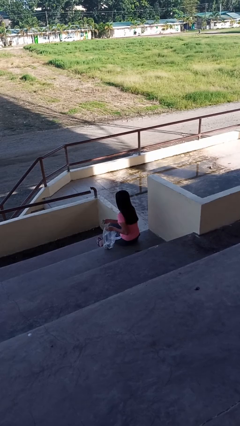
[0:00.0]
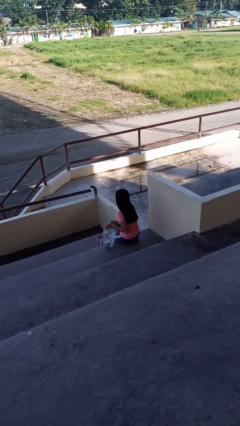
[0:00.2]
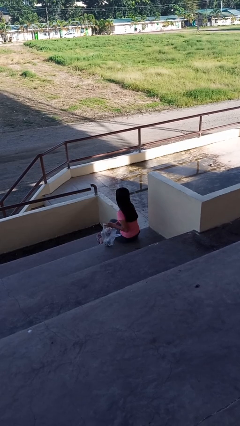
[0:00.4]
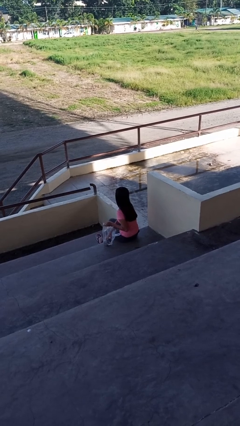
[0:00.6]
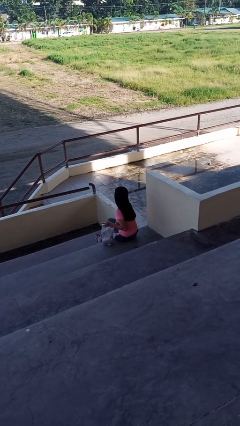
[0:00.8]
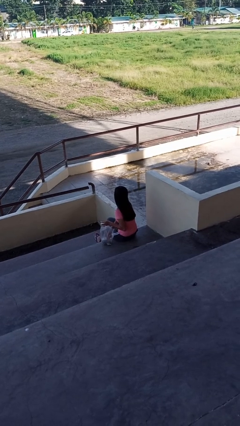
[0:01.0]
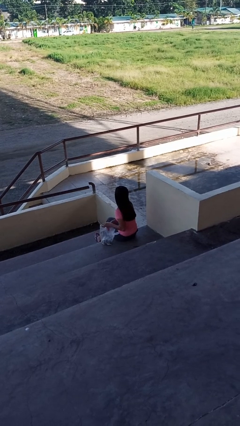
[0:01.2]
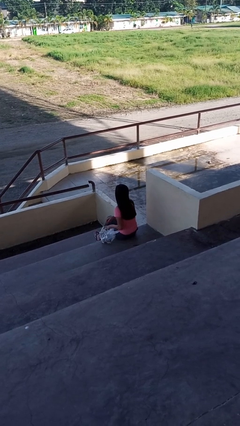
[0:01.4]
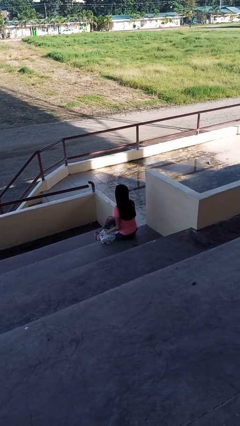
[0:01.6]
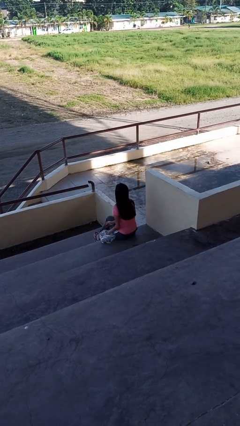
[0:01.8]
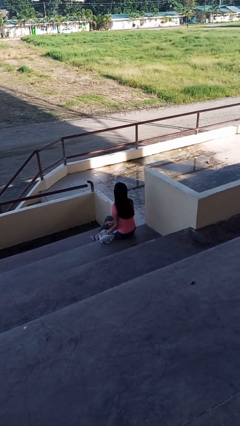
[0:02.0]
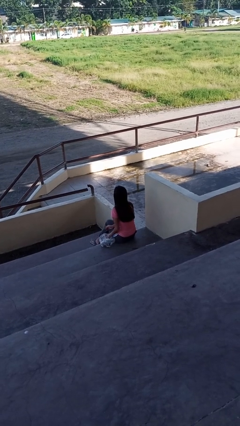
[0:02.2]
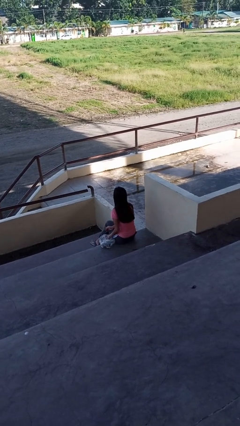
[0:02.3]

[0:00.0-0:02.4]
person puts object into bag

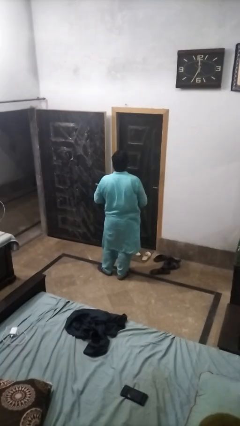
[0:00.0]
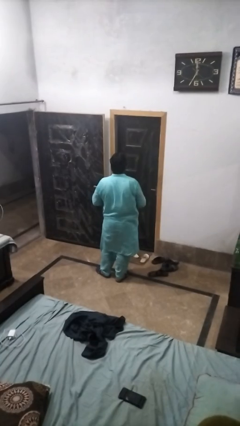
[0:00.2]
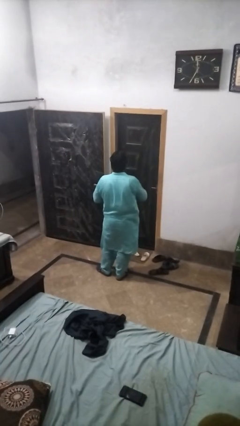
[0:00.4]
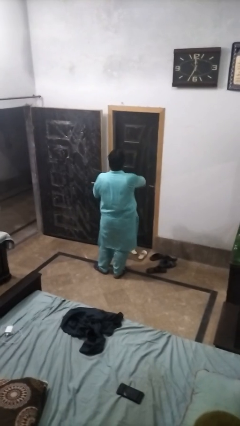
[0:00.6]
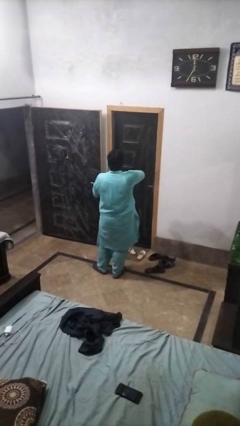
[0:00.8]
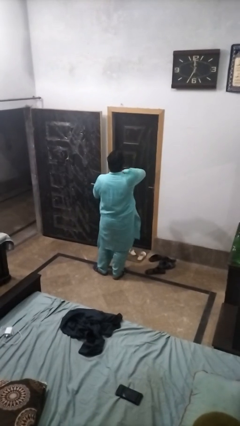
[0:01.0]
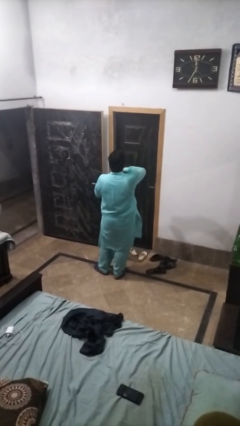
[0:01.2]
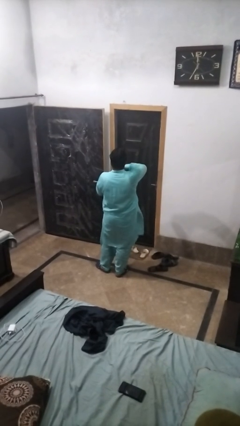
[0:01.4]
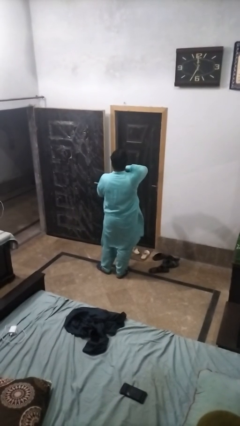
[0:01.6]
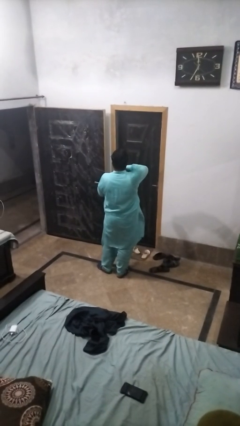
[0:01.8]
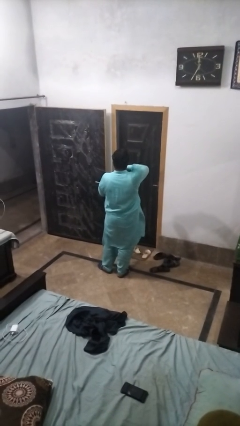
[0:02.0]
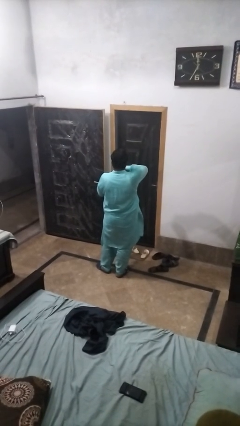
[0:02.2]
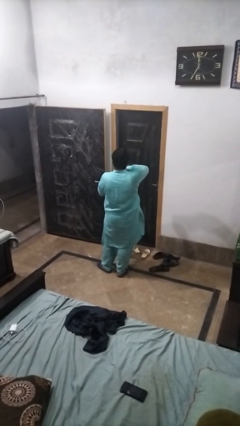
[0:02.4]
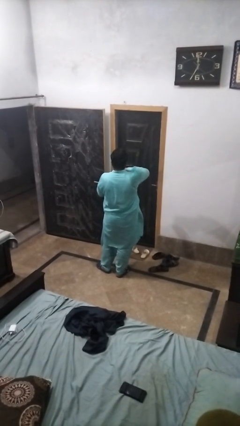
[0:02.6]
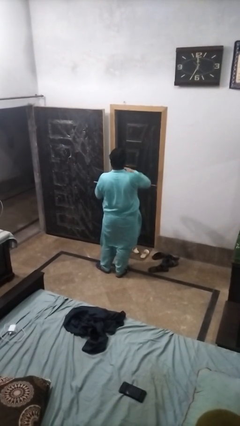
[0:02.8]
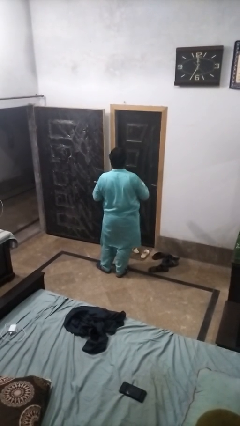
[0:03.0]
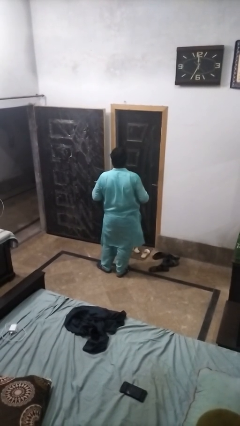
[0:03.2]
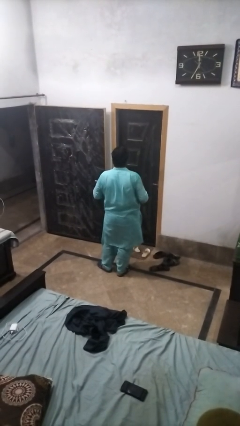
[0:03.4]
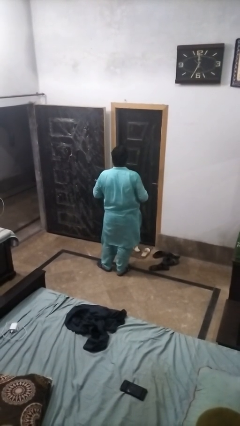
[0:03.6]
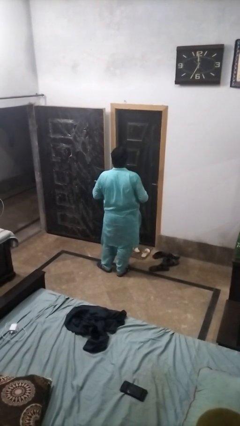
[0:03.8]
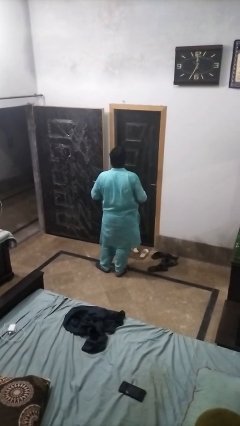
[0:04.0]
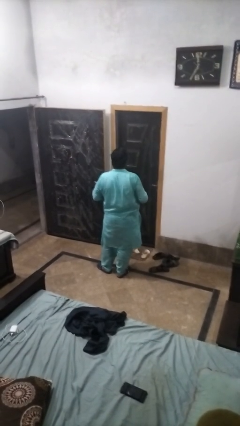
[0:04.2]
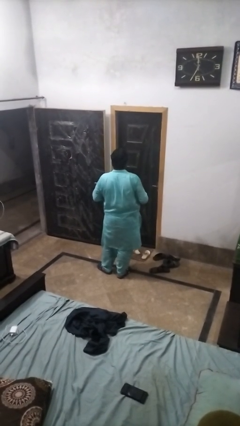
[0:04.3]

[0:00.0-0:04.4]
person opens jar

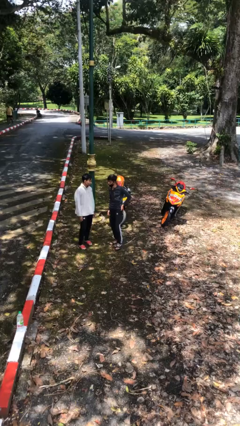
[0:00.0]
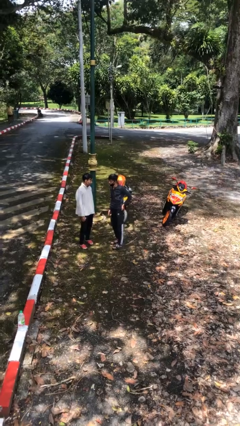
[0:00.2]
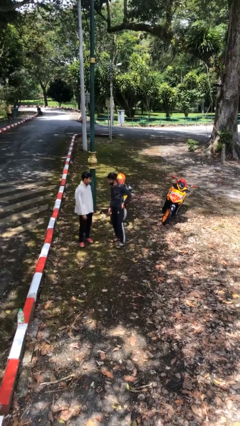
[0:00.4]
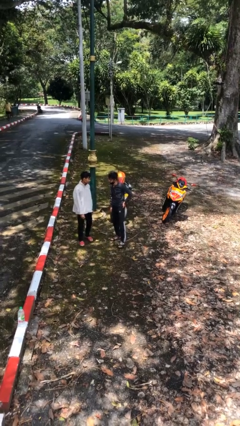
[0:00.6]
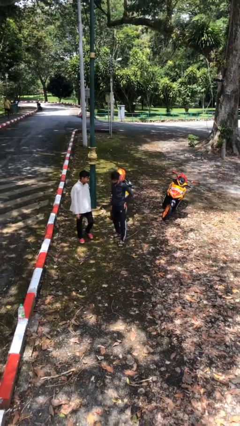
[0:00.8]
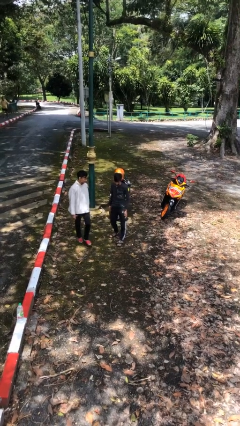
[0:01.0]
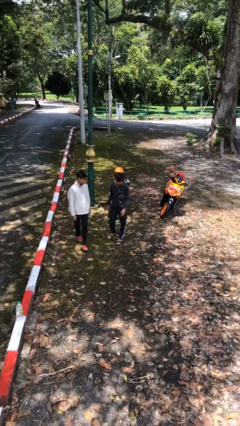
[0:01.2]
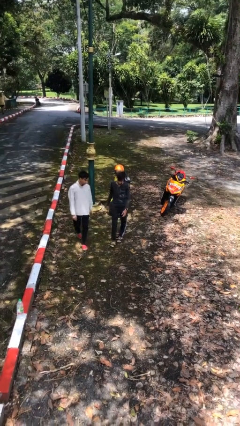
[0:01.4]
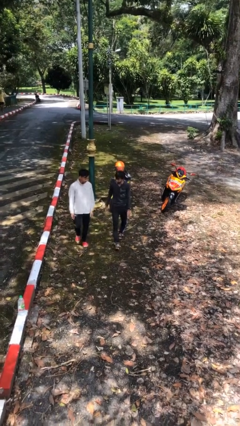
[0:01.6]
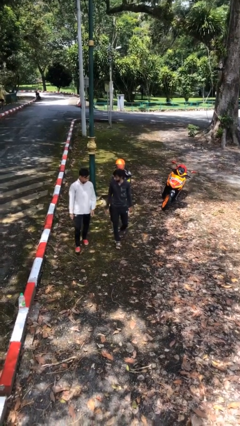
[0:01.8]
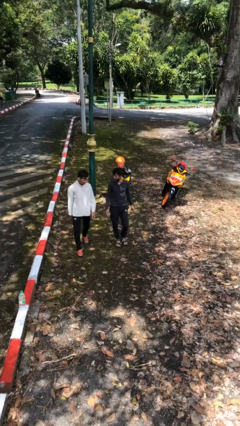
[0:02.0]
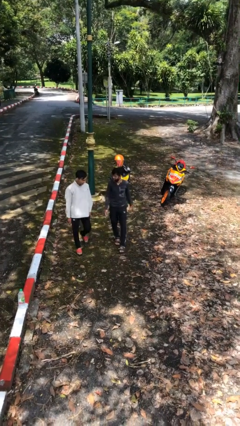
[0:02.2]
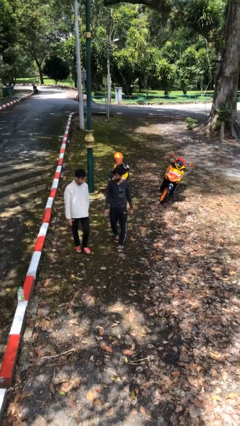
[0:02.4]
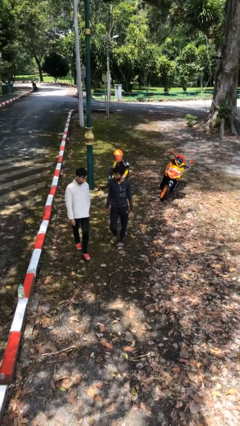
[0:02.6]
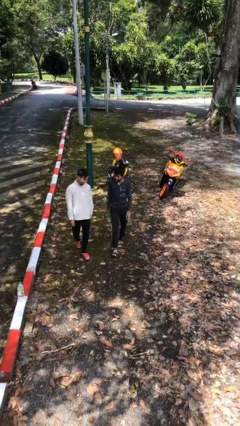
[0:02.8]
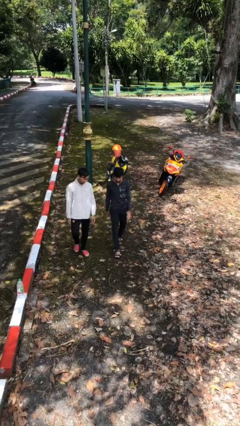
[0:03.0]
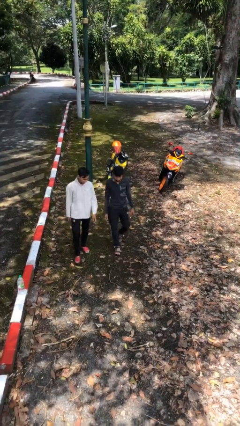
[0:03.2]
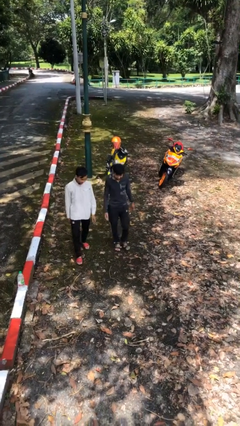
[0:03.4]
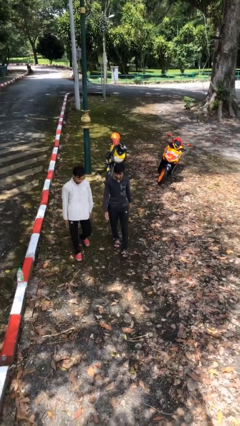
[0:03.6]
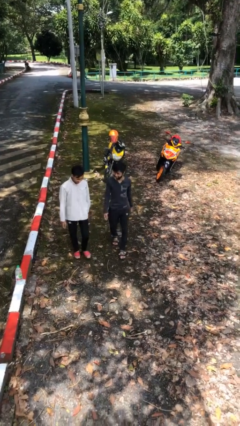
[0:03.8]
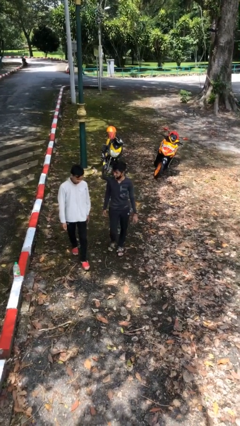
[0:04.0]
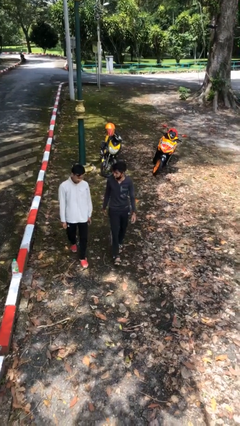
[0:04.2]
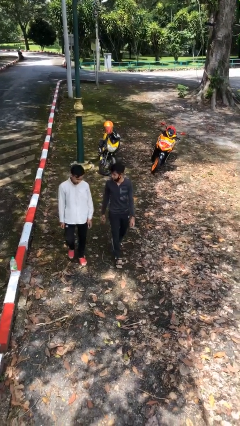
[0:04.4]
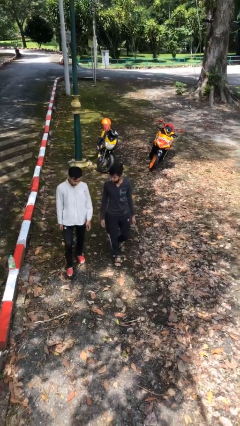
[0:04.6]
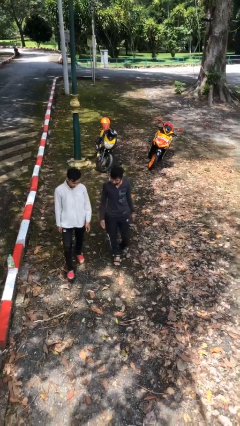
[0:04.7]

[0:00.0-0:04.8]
person talks to person

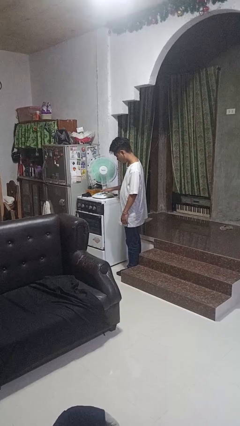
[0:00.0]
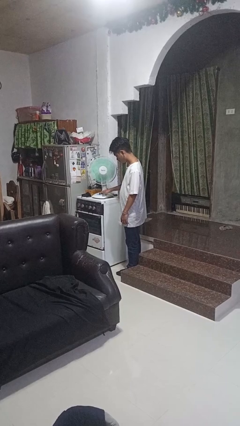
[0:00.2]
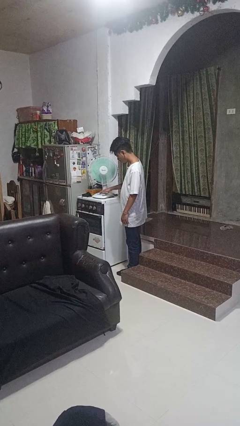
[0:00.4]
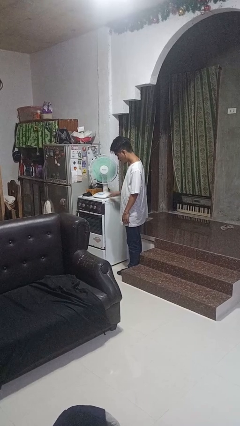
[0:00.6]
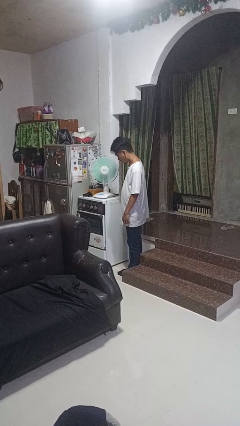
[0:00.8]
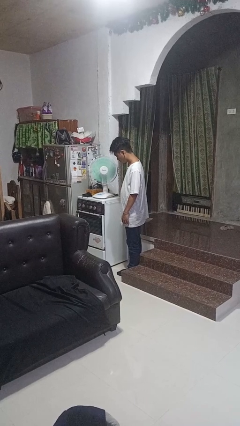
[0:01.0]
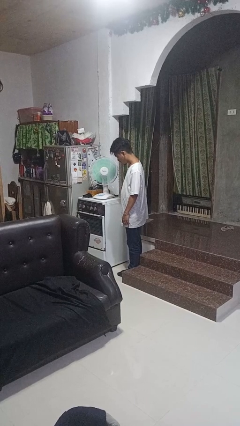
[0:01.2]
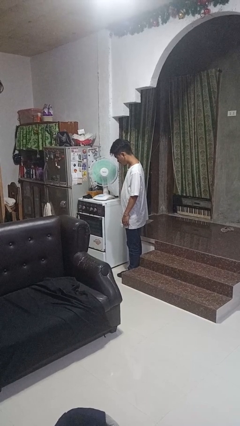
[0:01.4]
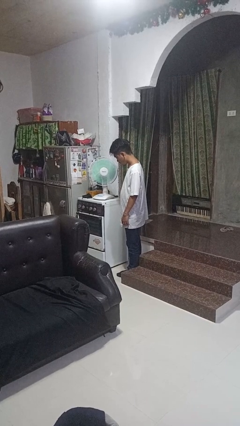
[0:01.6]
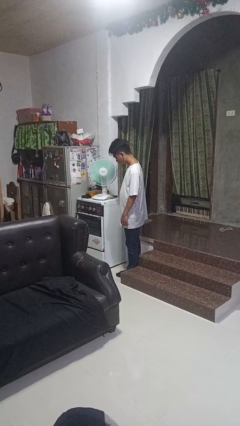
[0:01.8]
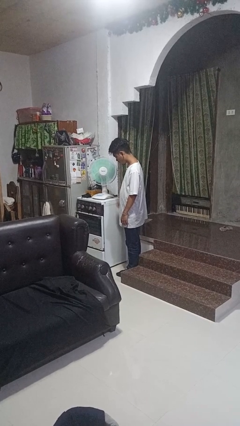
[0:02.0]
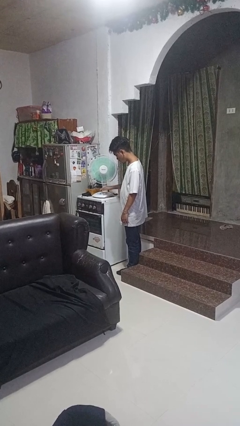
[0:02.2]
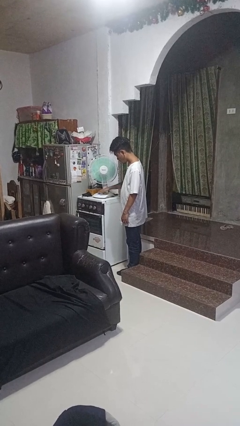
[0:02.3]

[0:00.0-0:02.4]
person turns on fan

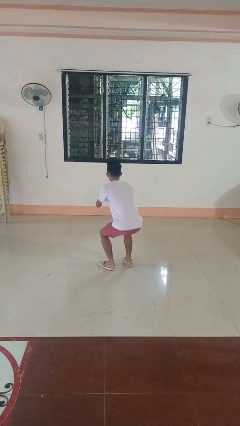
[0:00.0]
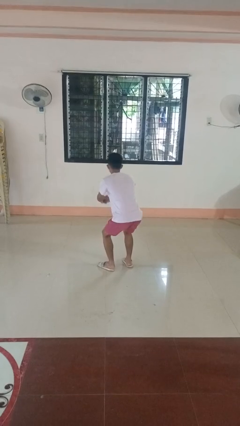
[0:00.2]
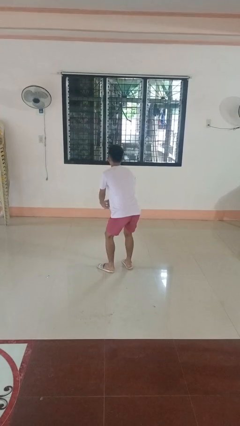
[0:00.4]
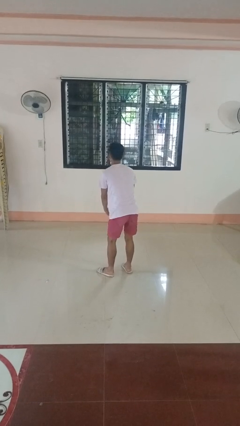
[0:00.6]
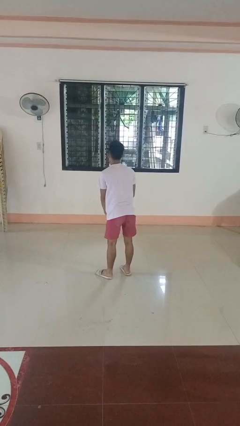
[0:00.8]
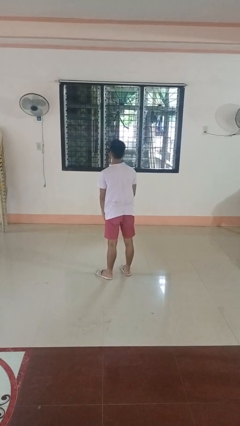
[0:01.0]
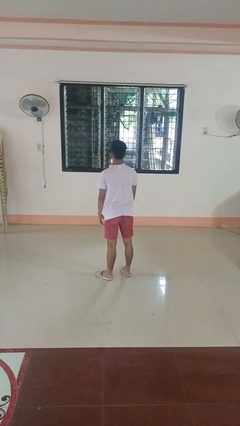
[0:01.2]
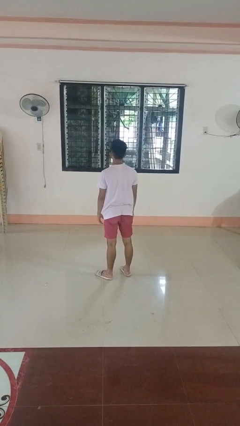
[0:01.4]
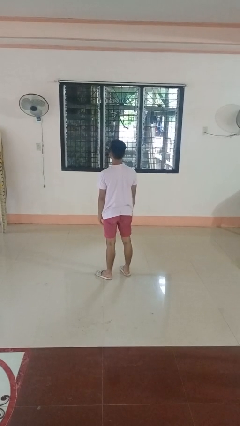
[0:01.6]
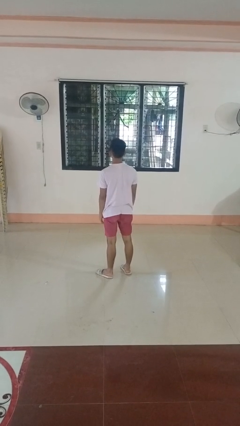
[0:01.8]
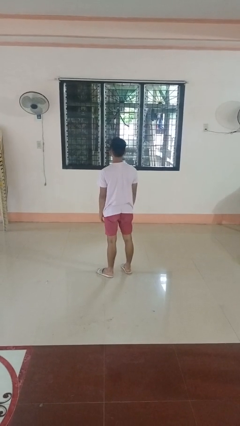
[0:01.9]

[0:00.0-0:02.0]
person stands up

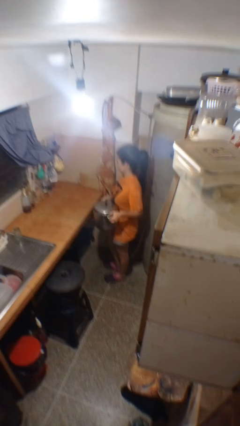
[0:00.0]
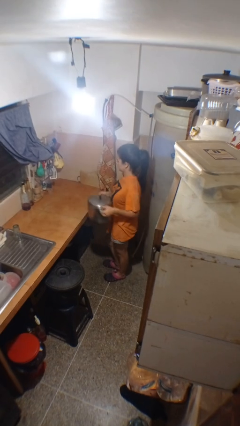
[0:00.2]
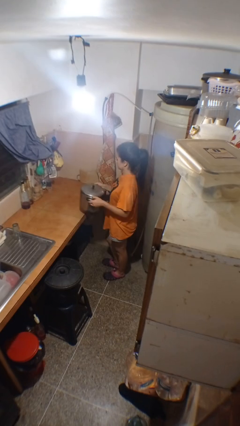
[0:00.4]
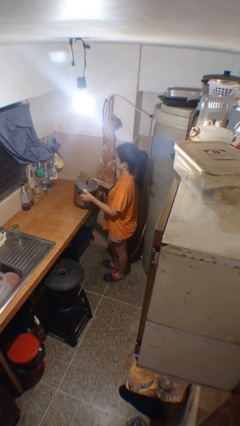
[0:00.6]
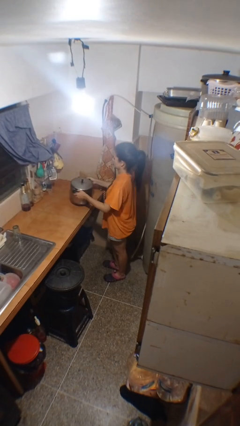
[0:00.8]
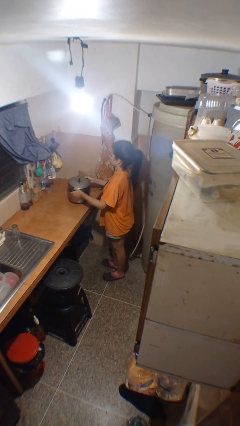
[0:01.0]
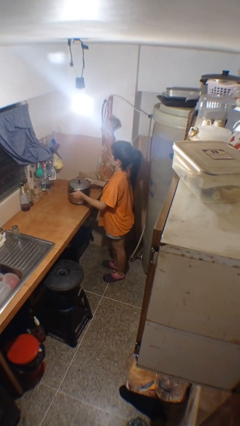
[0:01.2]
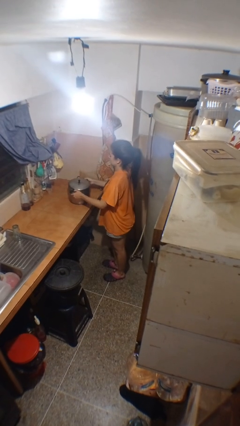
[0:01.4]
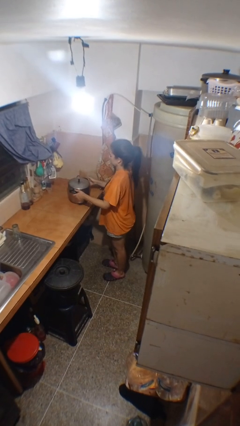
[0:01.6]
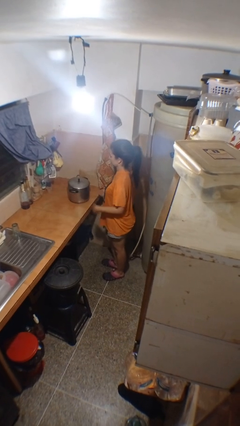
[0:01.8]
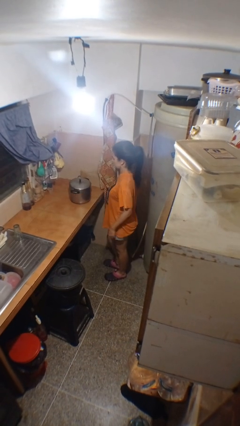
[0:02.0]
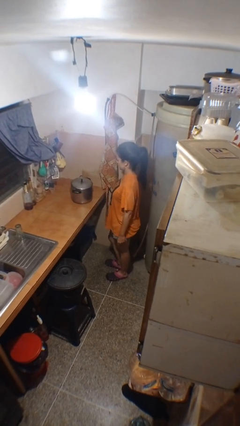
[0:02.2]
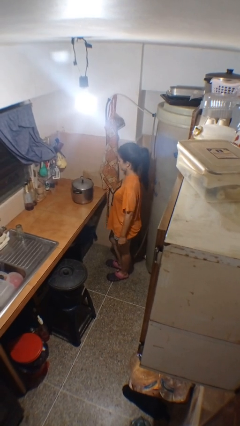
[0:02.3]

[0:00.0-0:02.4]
person puts down object on countertop
